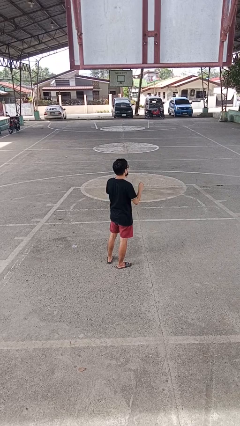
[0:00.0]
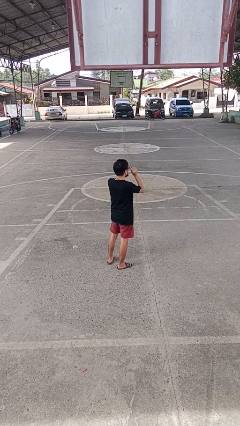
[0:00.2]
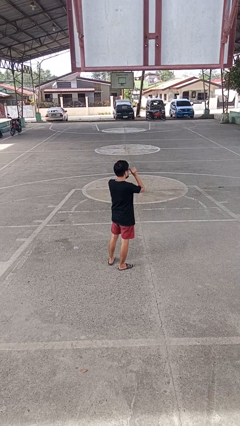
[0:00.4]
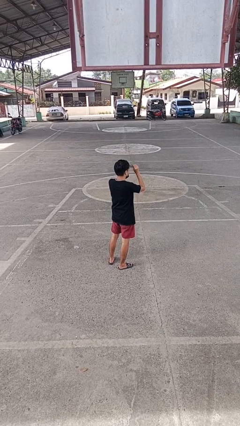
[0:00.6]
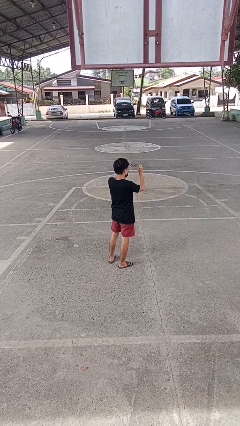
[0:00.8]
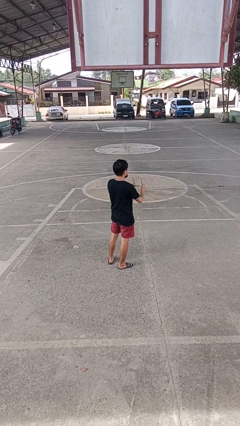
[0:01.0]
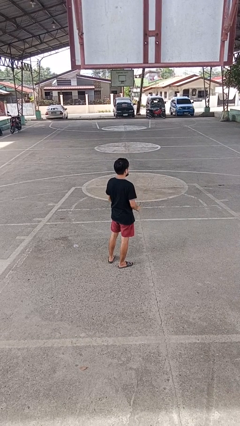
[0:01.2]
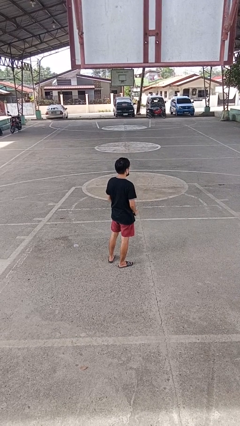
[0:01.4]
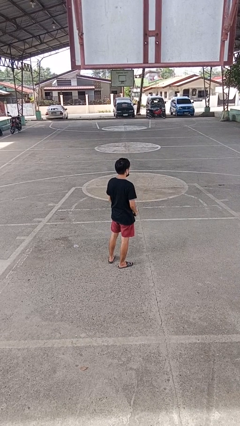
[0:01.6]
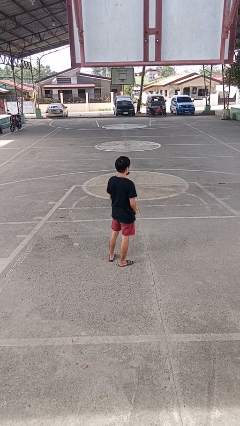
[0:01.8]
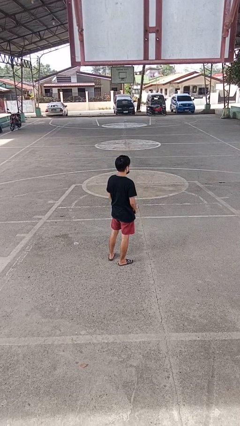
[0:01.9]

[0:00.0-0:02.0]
person takes off glasses

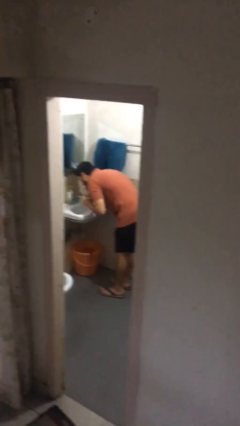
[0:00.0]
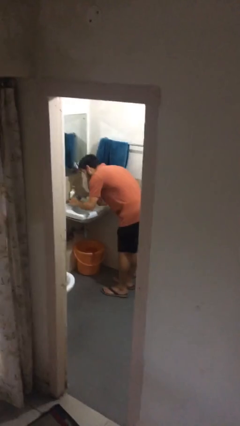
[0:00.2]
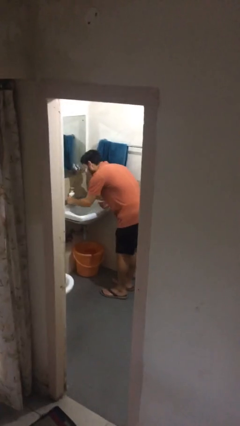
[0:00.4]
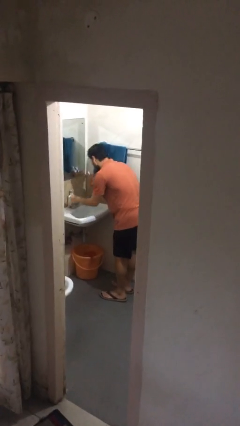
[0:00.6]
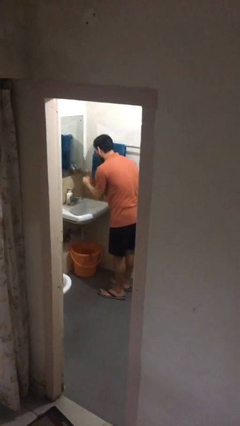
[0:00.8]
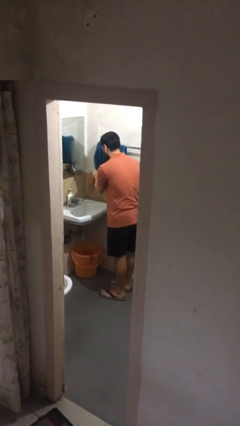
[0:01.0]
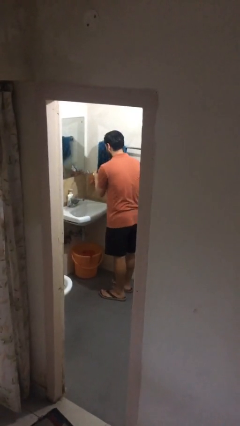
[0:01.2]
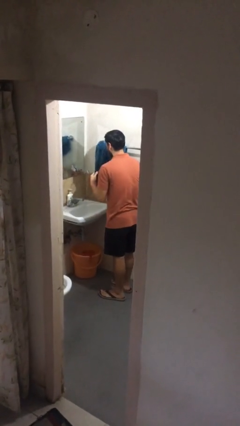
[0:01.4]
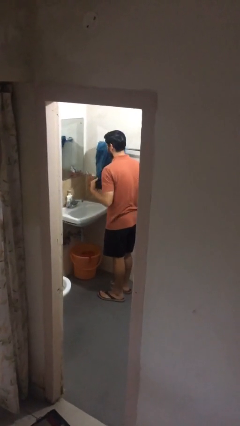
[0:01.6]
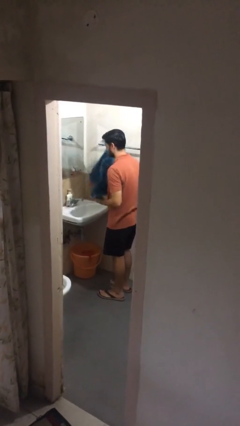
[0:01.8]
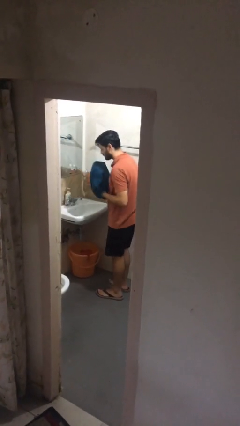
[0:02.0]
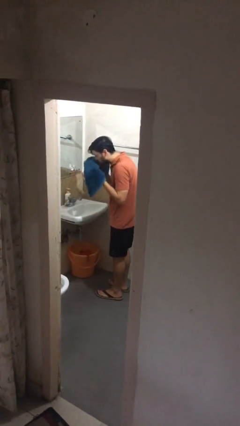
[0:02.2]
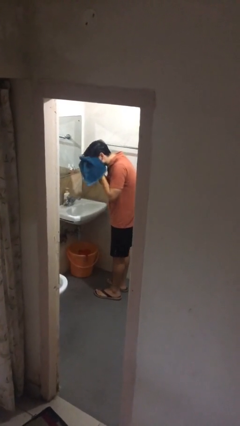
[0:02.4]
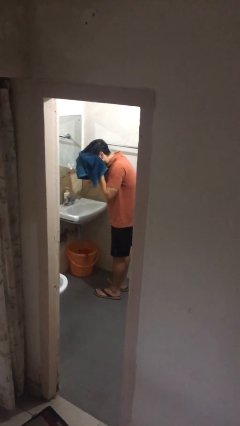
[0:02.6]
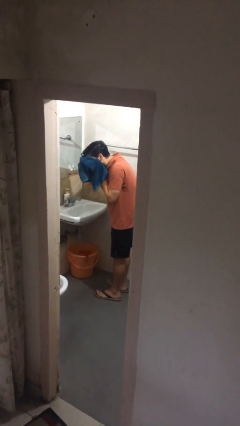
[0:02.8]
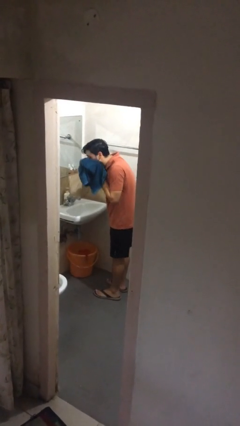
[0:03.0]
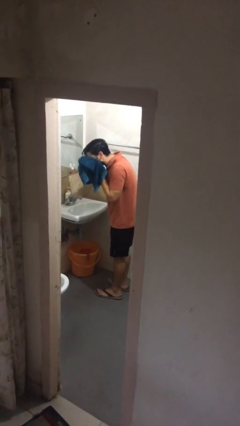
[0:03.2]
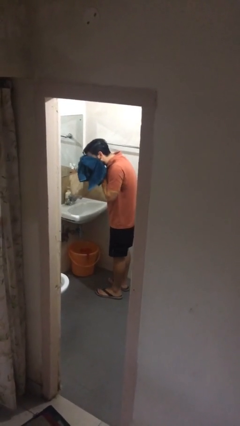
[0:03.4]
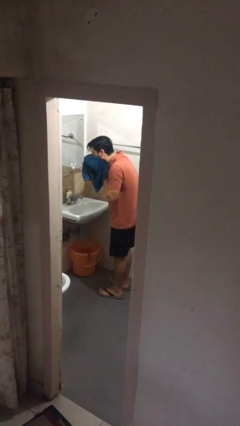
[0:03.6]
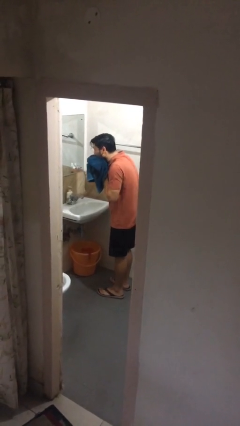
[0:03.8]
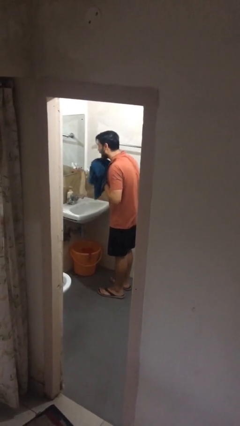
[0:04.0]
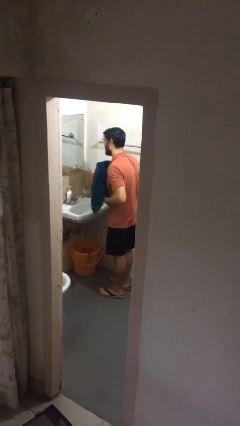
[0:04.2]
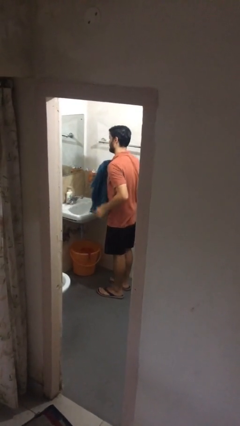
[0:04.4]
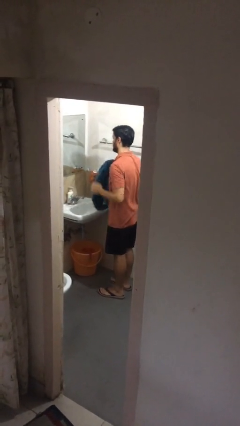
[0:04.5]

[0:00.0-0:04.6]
person dries face with towel

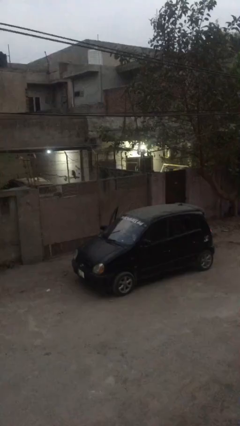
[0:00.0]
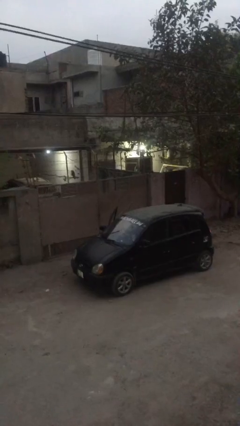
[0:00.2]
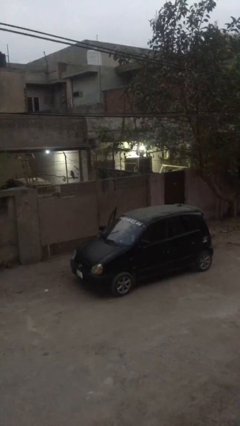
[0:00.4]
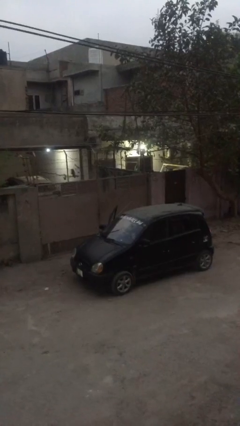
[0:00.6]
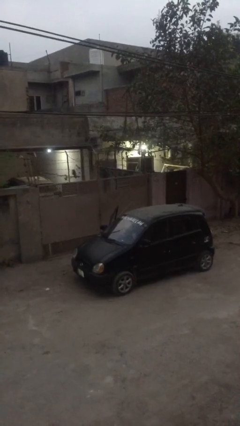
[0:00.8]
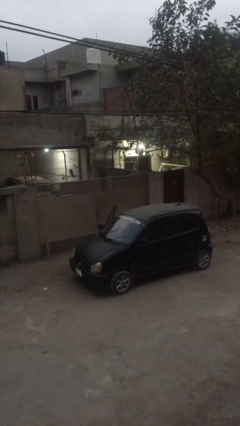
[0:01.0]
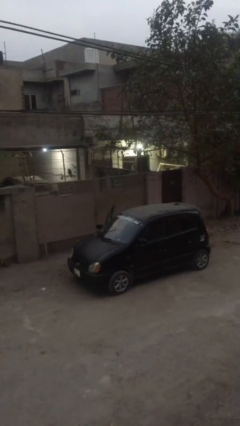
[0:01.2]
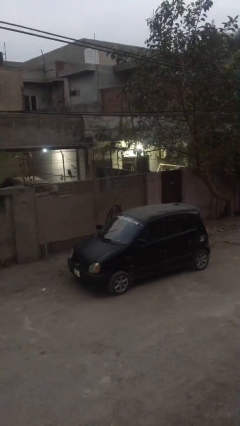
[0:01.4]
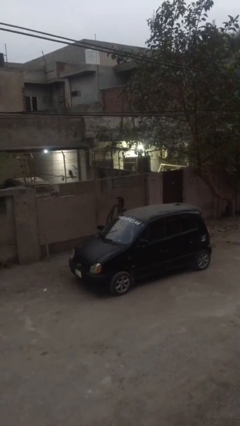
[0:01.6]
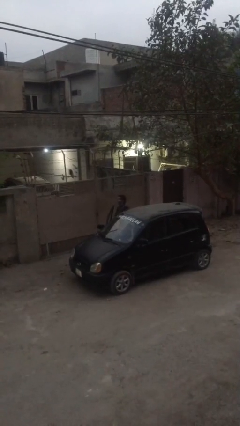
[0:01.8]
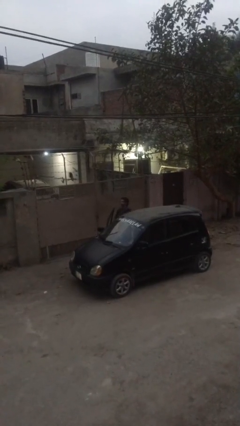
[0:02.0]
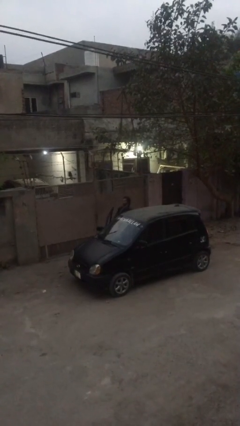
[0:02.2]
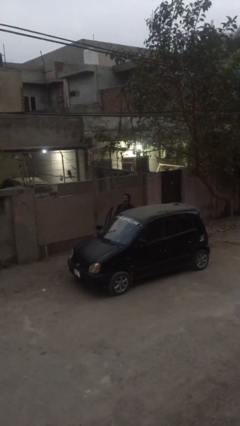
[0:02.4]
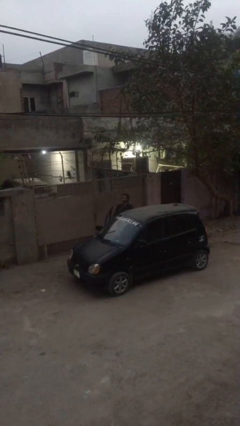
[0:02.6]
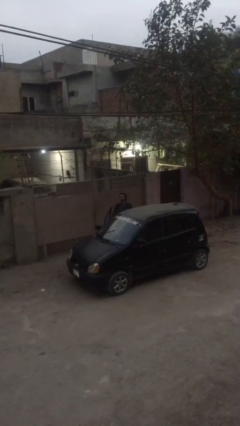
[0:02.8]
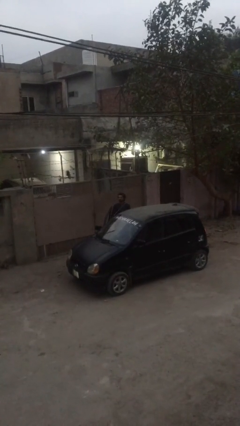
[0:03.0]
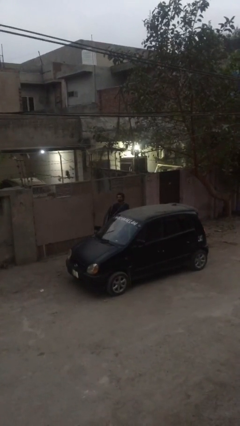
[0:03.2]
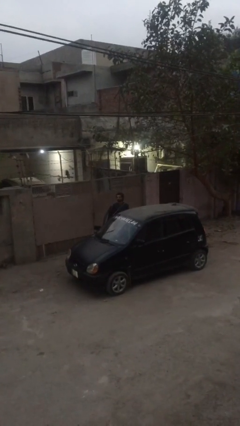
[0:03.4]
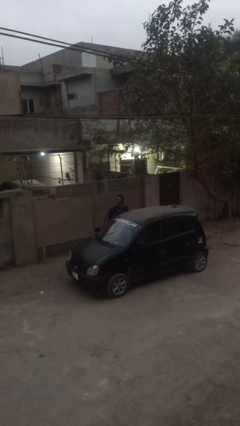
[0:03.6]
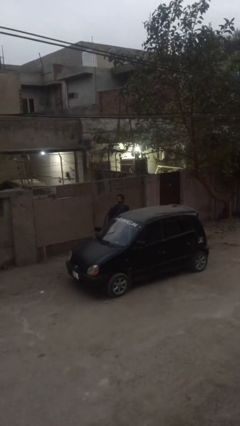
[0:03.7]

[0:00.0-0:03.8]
person exits car

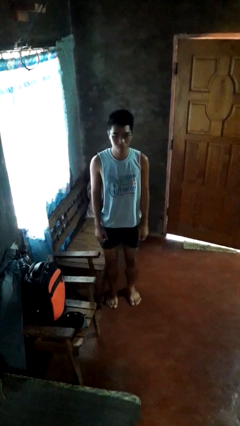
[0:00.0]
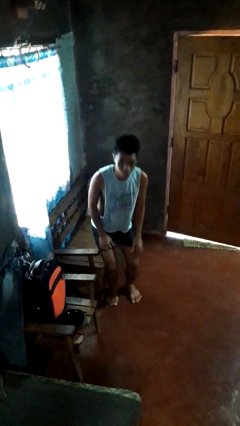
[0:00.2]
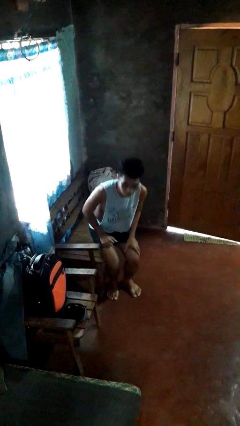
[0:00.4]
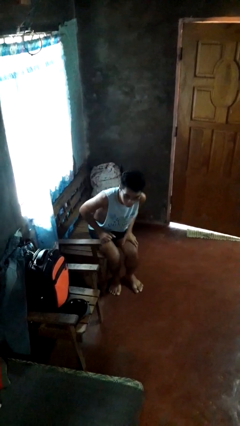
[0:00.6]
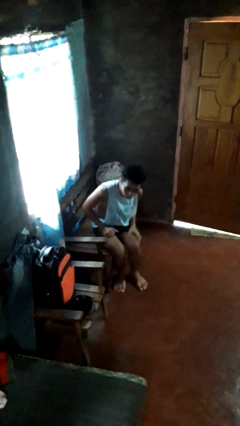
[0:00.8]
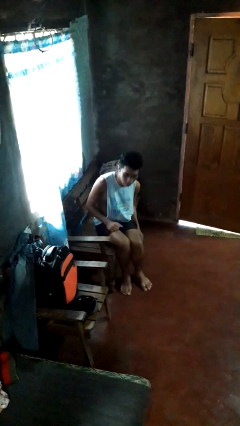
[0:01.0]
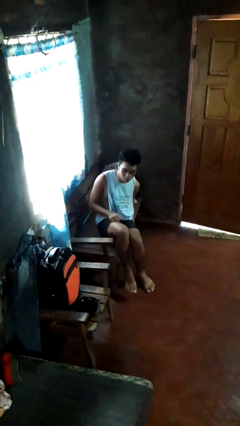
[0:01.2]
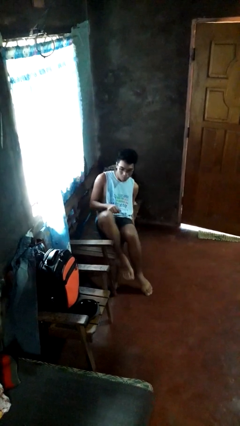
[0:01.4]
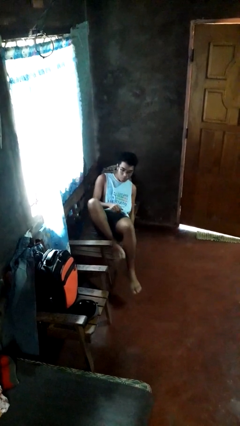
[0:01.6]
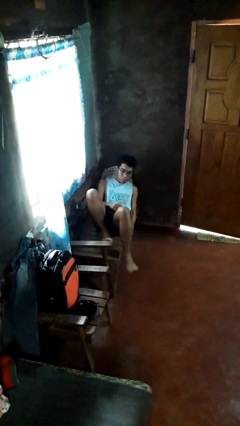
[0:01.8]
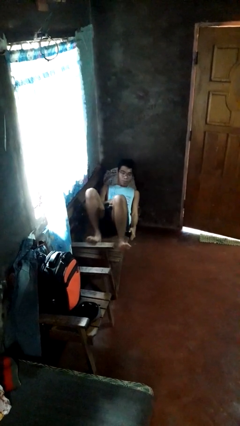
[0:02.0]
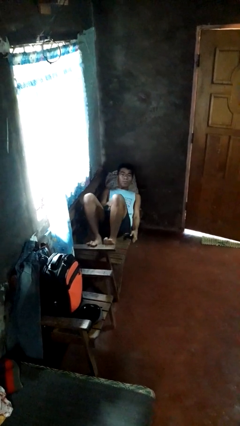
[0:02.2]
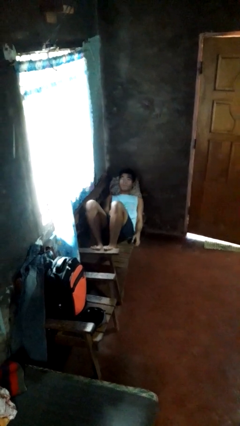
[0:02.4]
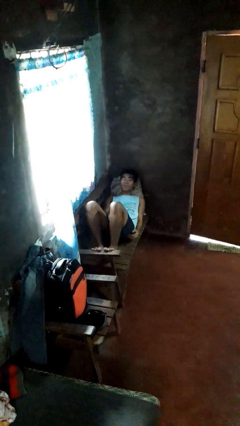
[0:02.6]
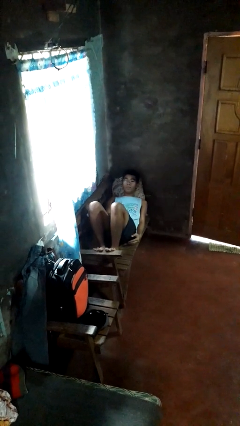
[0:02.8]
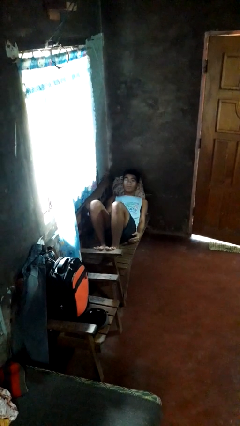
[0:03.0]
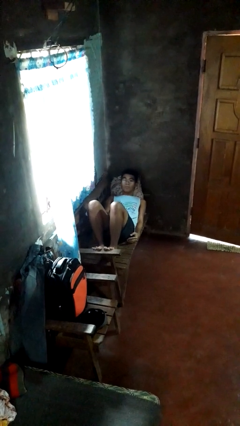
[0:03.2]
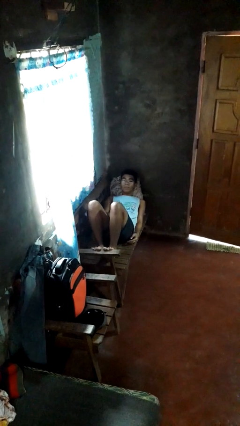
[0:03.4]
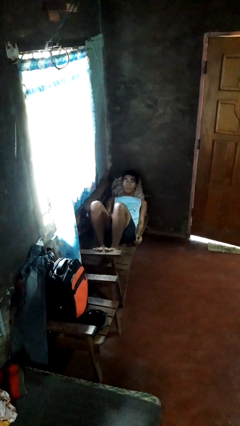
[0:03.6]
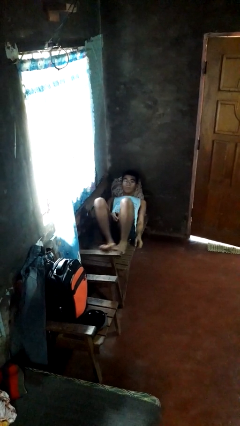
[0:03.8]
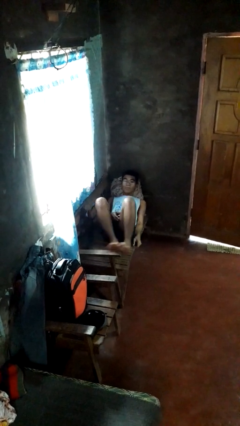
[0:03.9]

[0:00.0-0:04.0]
person lies down on couch

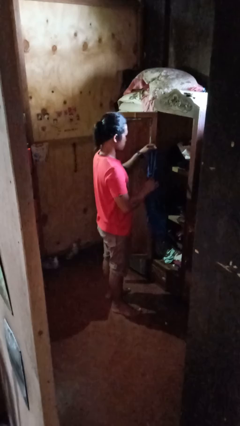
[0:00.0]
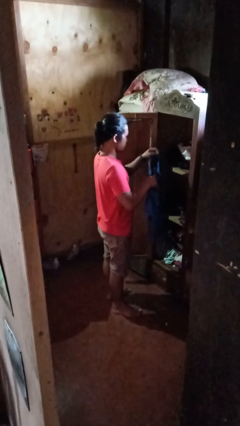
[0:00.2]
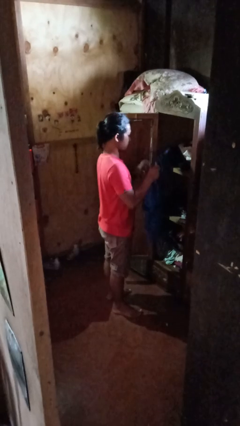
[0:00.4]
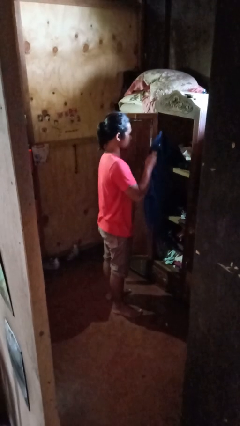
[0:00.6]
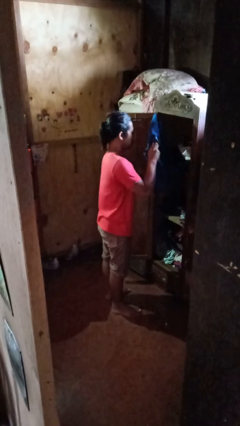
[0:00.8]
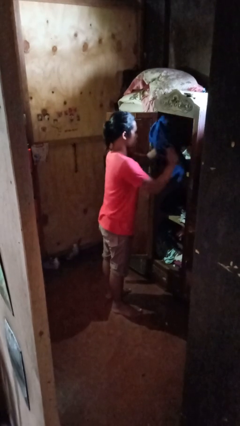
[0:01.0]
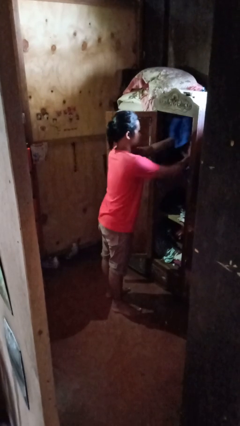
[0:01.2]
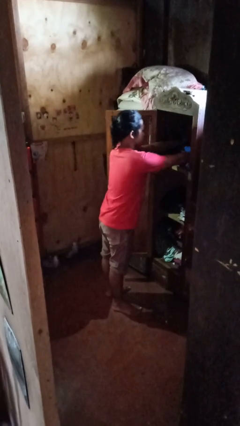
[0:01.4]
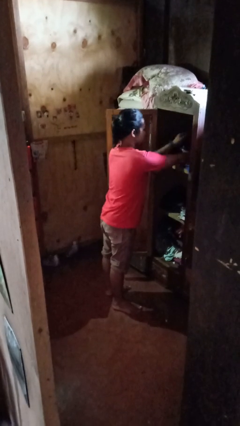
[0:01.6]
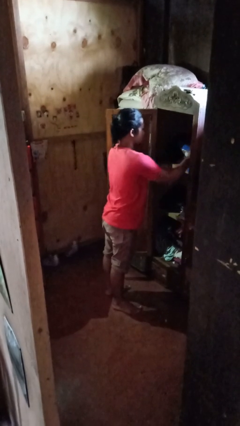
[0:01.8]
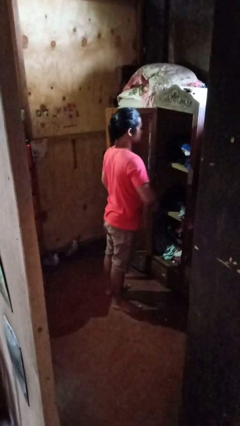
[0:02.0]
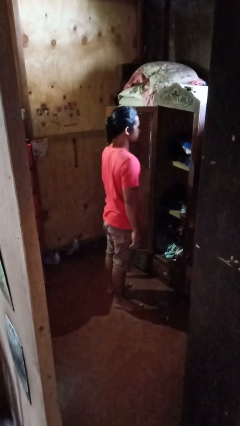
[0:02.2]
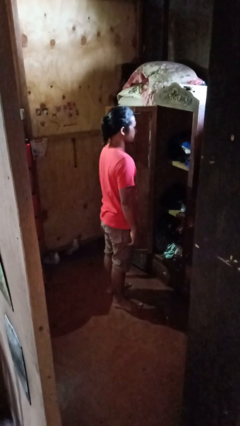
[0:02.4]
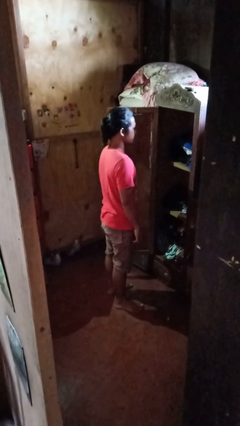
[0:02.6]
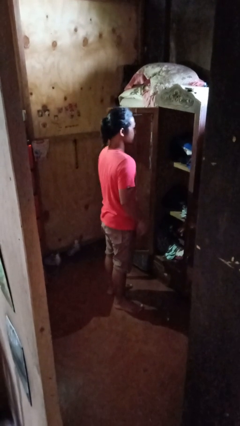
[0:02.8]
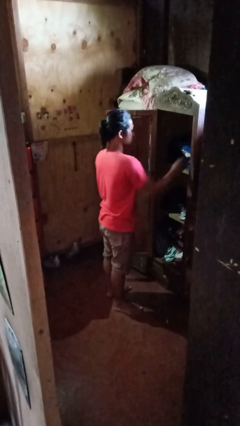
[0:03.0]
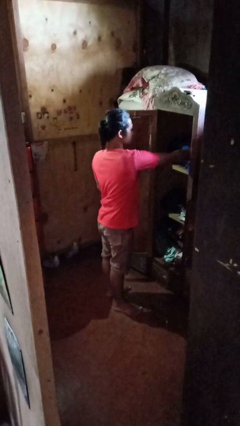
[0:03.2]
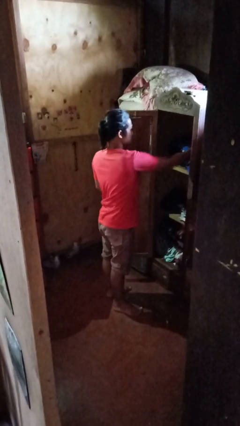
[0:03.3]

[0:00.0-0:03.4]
person puts clothes into closet

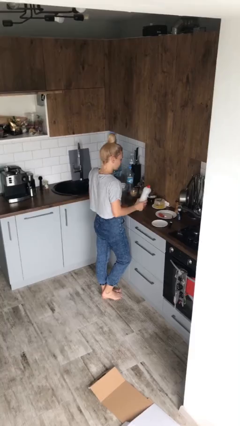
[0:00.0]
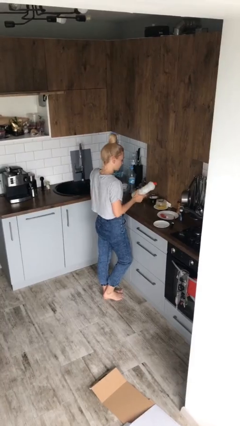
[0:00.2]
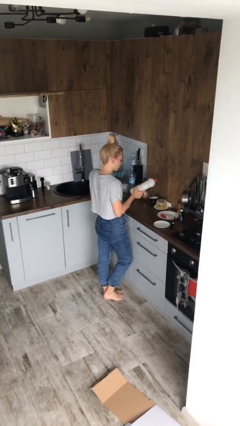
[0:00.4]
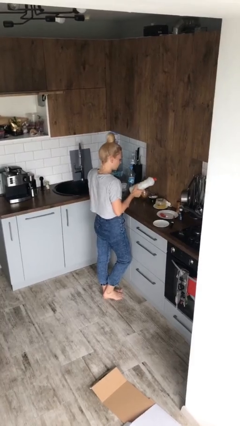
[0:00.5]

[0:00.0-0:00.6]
person picks up object from table
